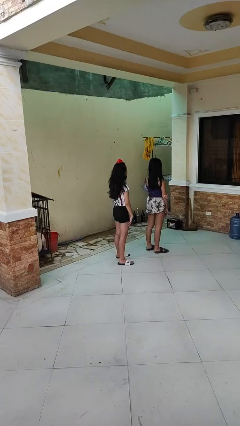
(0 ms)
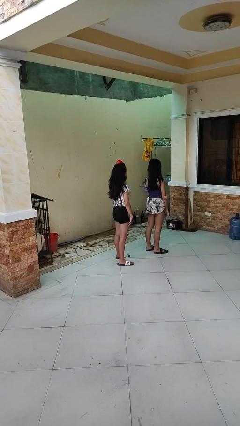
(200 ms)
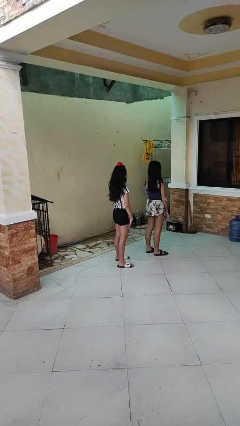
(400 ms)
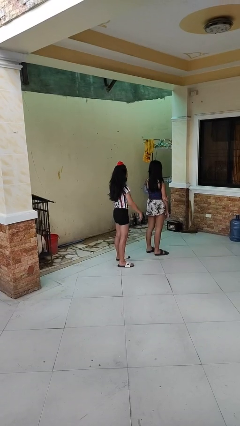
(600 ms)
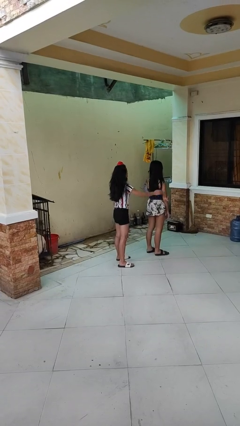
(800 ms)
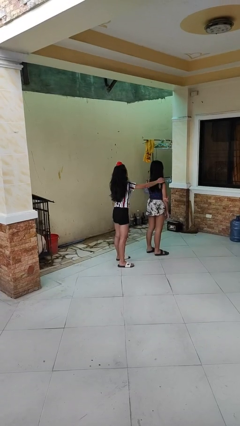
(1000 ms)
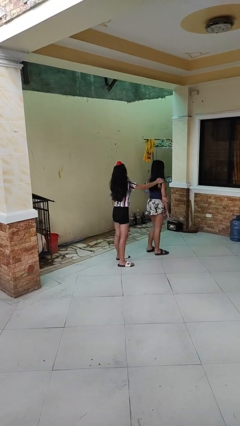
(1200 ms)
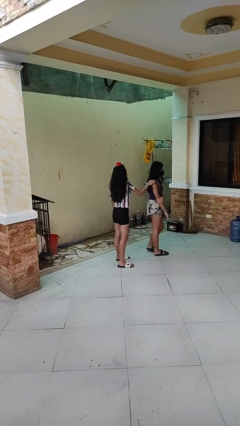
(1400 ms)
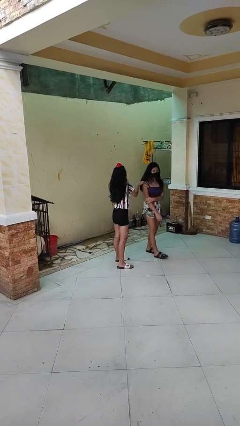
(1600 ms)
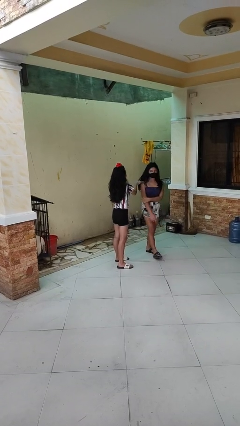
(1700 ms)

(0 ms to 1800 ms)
person grabs person by shoulder

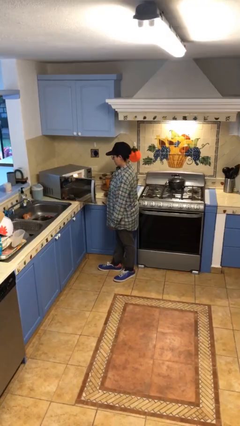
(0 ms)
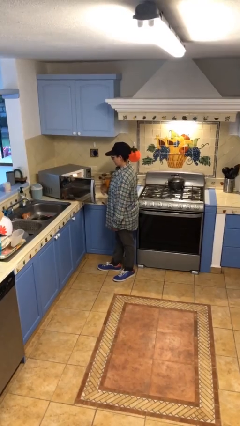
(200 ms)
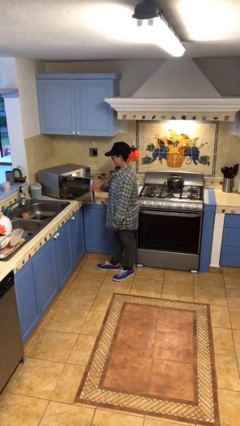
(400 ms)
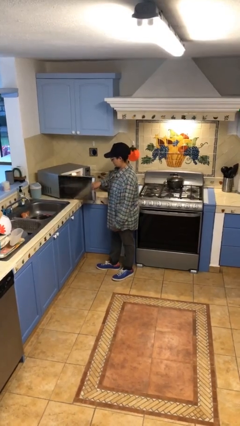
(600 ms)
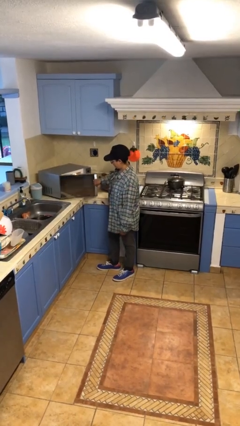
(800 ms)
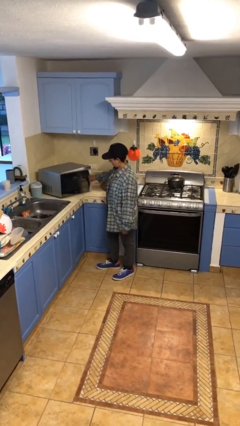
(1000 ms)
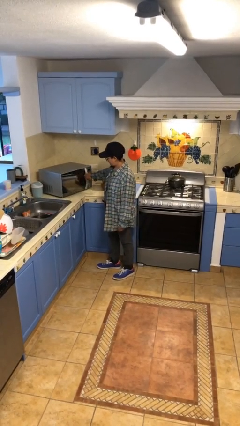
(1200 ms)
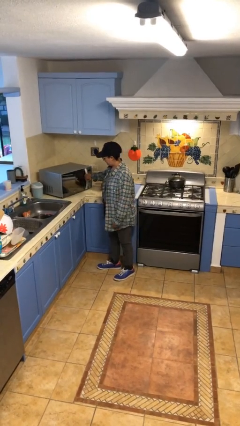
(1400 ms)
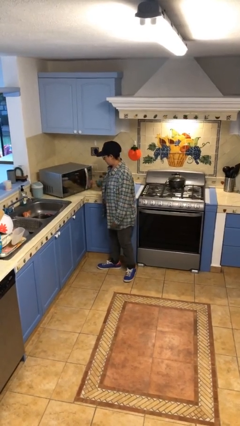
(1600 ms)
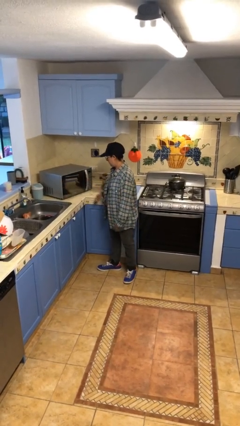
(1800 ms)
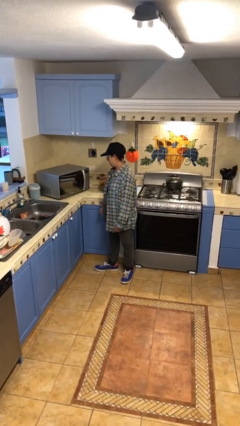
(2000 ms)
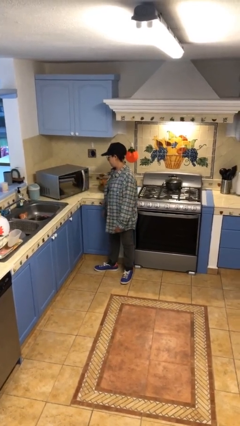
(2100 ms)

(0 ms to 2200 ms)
person closes microwave

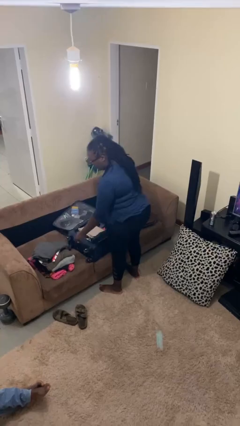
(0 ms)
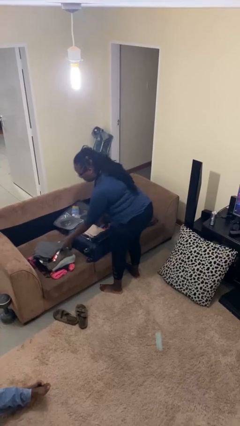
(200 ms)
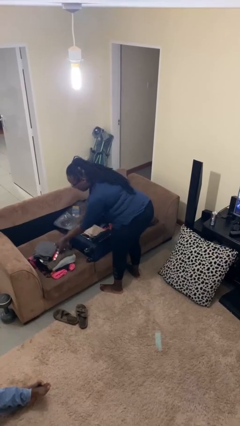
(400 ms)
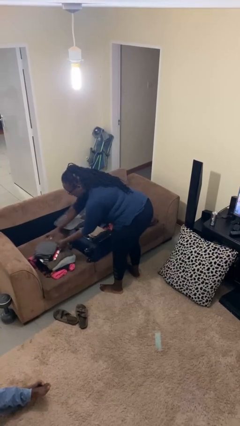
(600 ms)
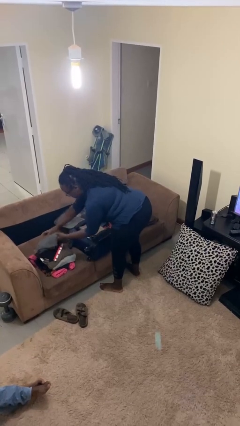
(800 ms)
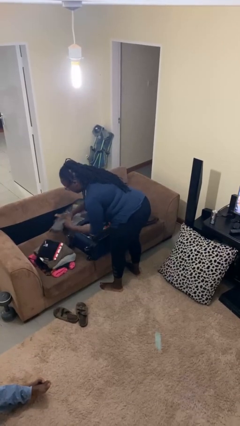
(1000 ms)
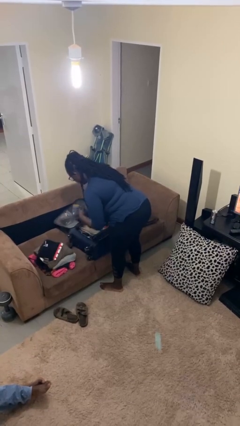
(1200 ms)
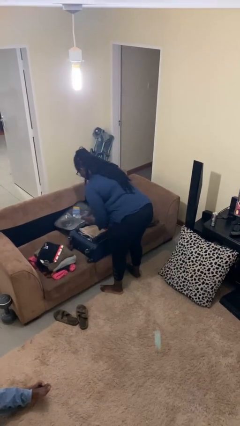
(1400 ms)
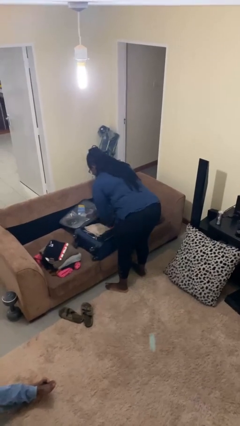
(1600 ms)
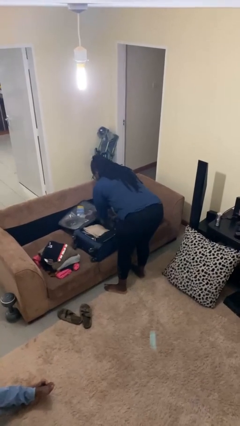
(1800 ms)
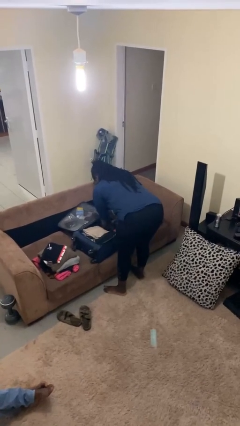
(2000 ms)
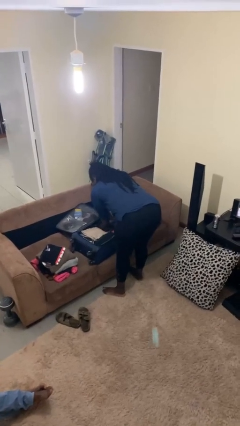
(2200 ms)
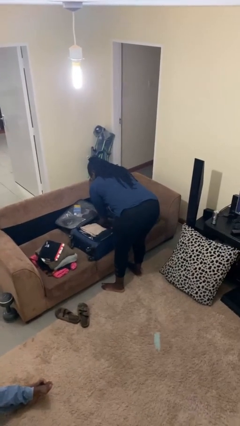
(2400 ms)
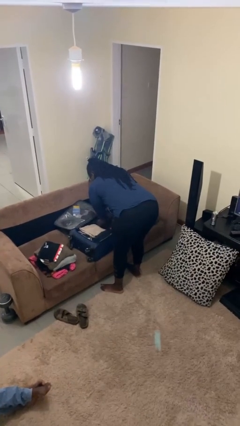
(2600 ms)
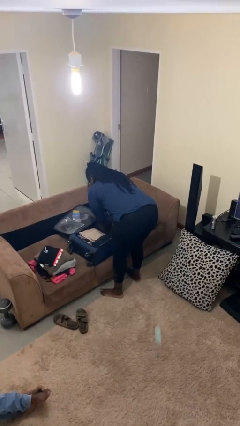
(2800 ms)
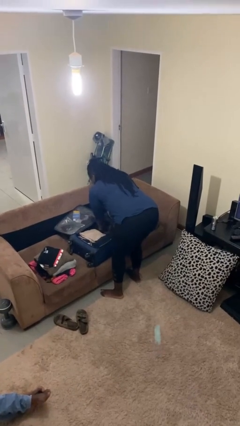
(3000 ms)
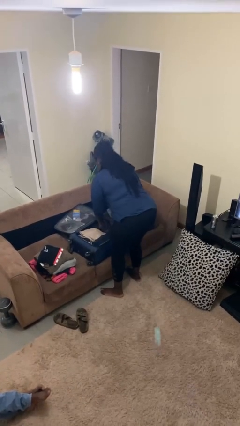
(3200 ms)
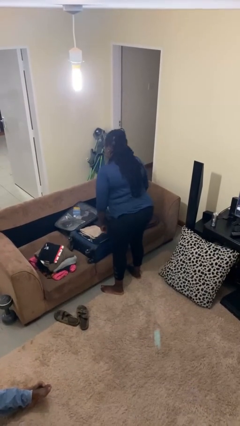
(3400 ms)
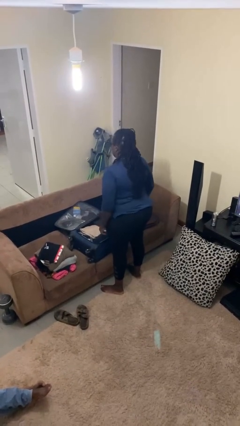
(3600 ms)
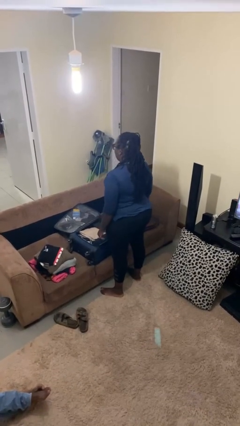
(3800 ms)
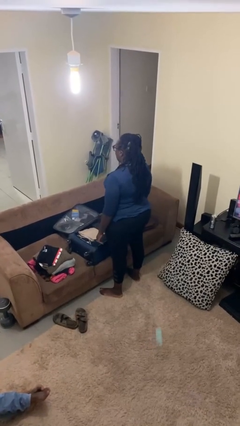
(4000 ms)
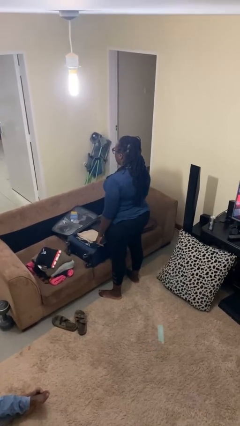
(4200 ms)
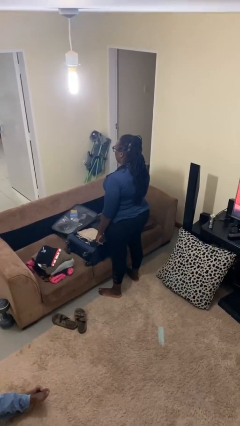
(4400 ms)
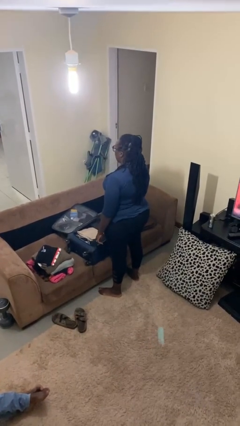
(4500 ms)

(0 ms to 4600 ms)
person loads clothes into suitcase

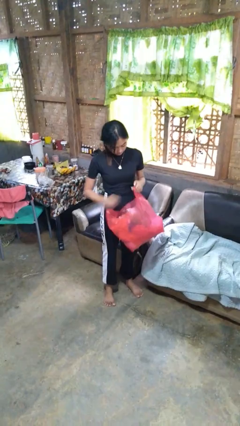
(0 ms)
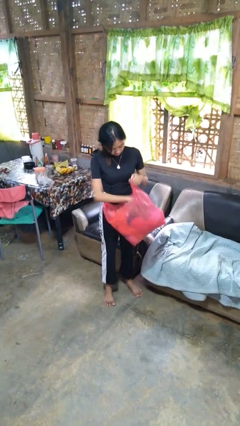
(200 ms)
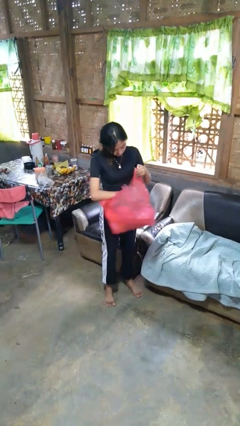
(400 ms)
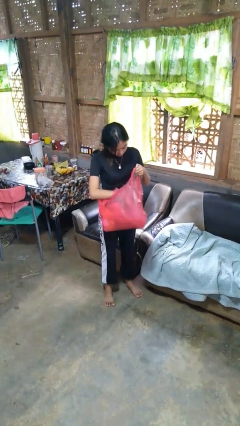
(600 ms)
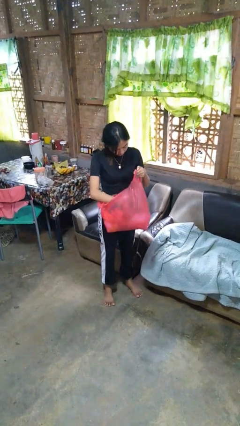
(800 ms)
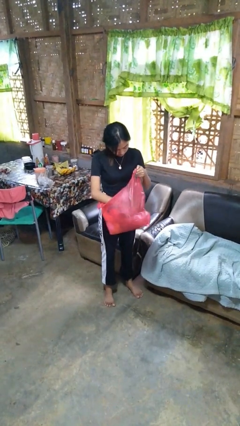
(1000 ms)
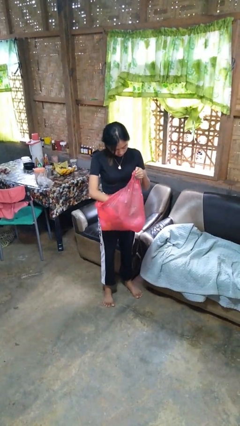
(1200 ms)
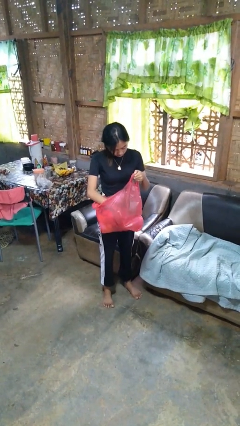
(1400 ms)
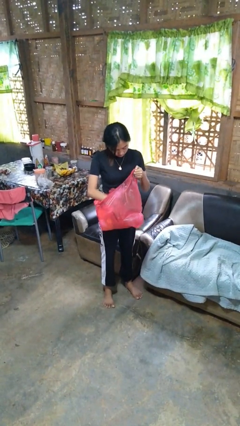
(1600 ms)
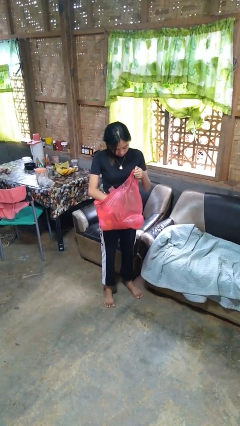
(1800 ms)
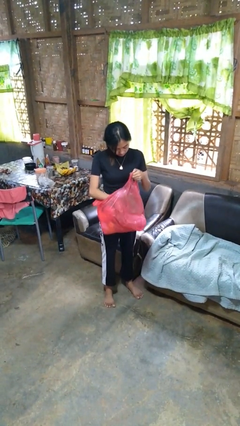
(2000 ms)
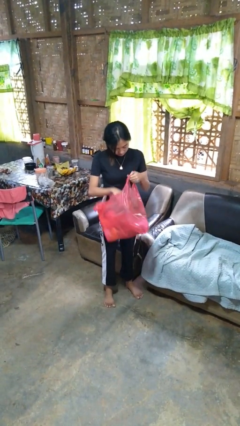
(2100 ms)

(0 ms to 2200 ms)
person searches in bag

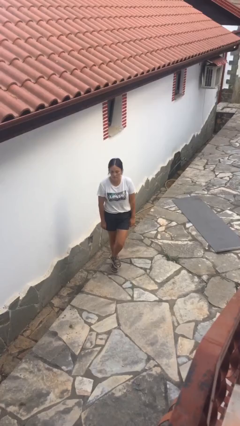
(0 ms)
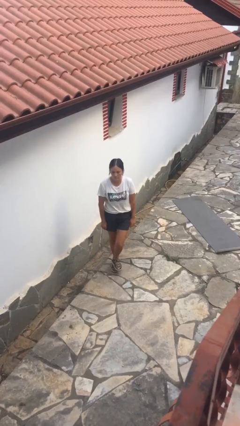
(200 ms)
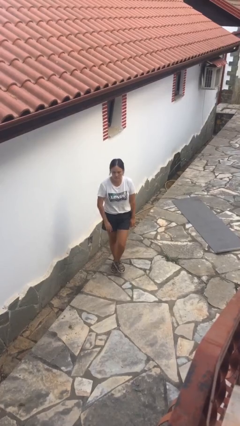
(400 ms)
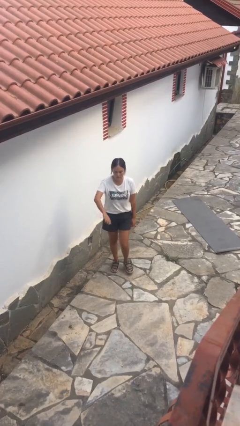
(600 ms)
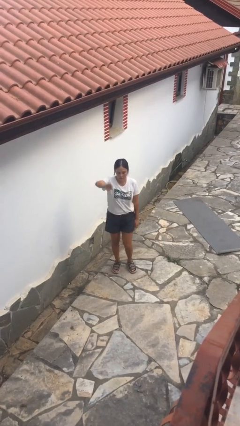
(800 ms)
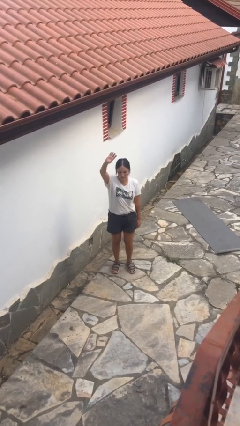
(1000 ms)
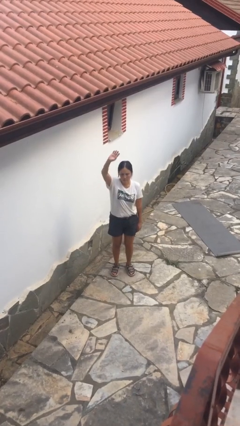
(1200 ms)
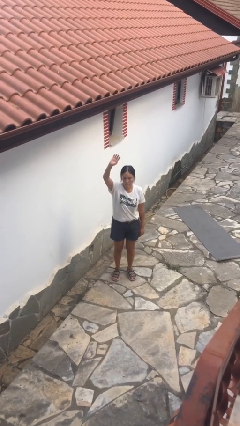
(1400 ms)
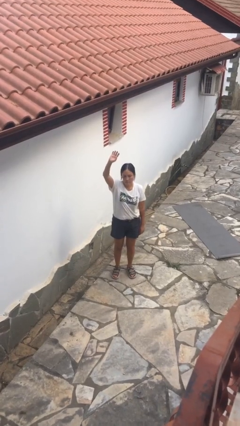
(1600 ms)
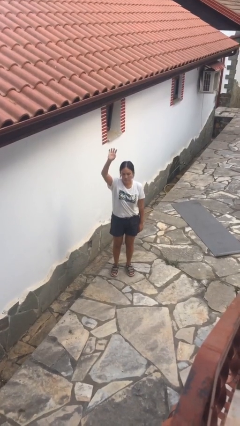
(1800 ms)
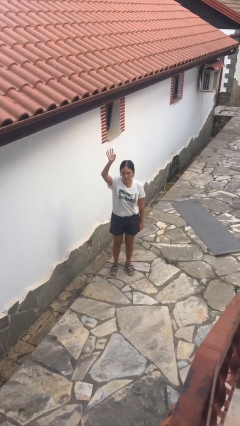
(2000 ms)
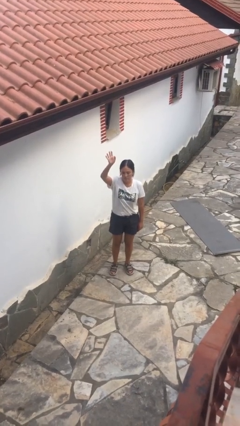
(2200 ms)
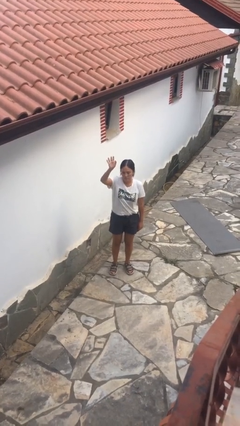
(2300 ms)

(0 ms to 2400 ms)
person gestures swipe up

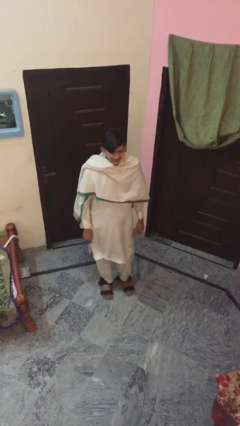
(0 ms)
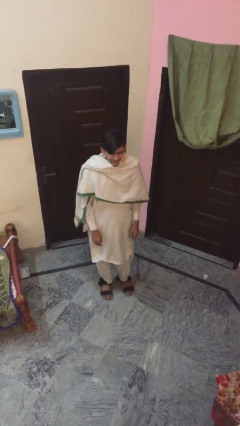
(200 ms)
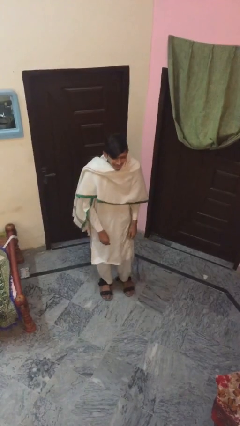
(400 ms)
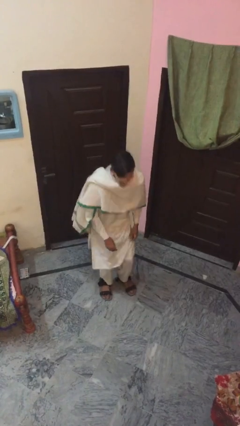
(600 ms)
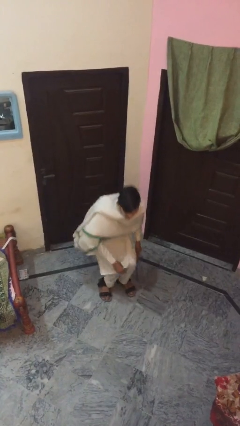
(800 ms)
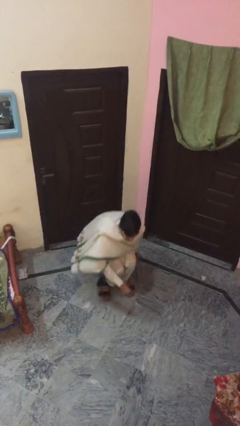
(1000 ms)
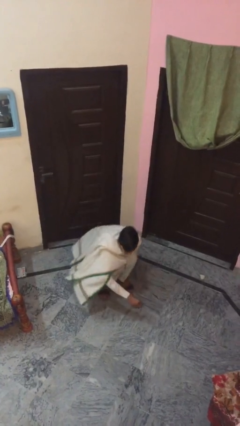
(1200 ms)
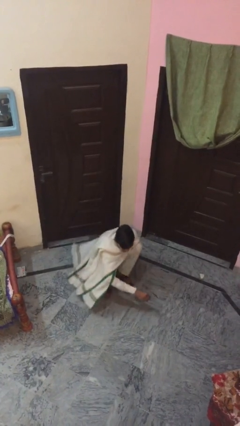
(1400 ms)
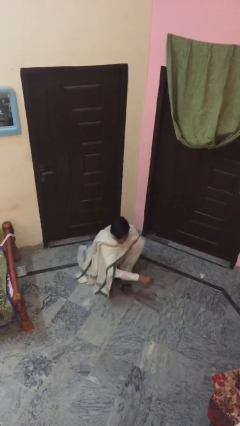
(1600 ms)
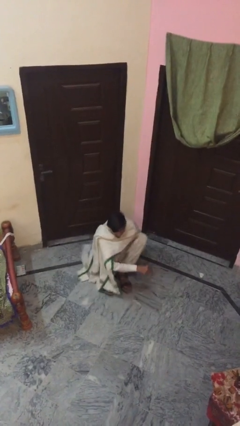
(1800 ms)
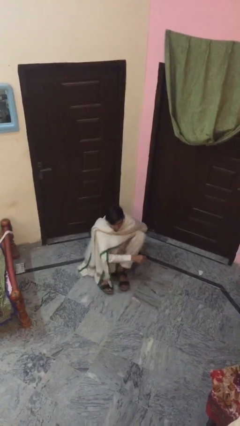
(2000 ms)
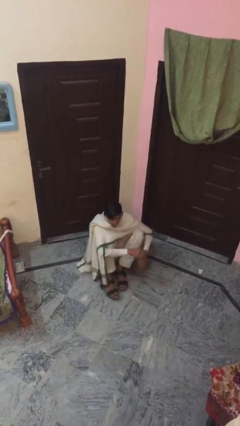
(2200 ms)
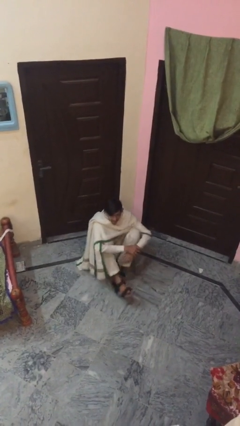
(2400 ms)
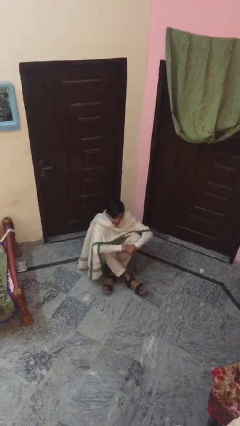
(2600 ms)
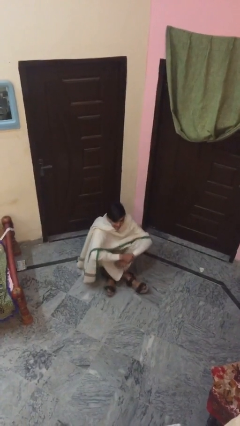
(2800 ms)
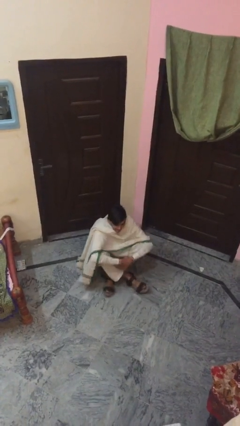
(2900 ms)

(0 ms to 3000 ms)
person sits down

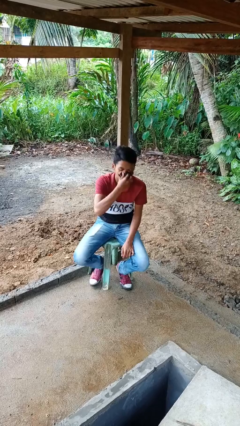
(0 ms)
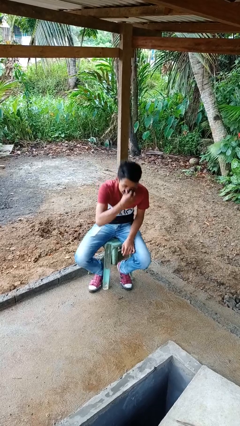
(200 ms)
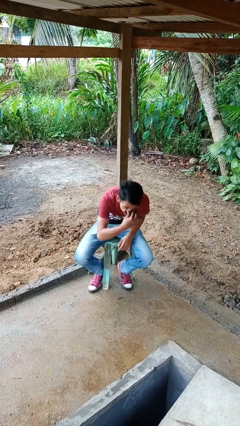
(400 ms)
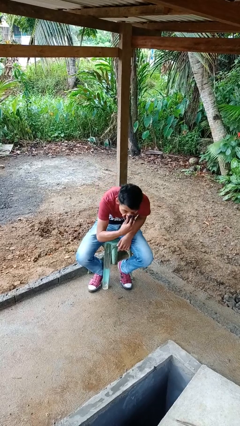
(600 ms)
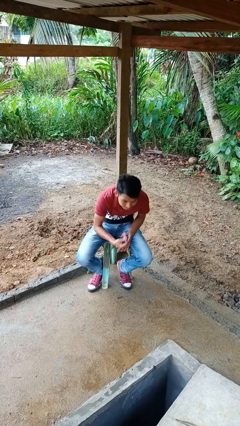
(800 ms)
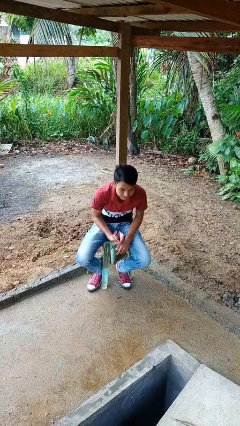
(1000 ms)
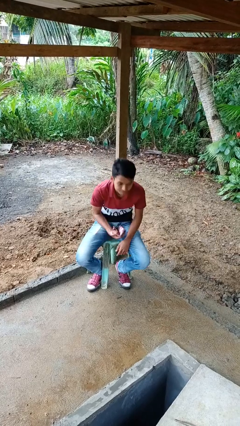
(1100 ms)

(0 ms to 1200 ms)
person blows nose
